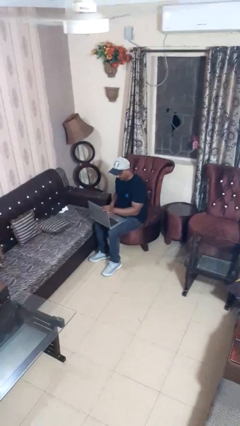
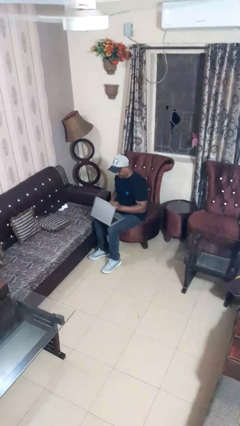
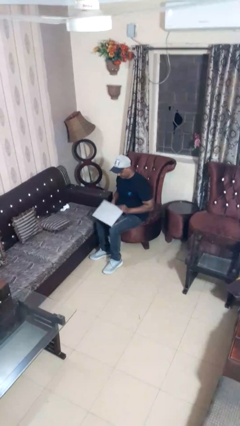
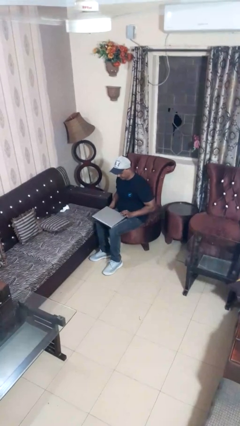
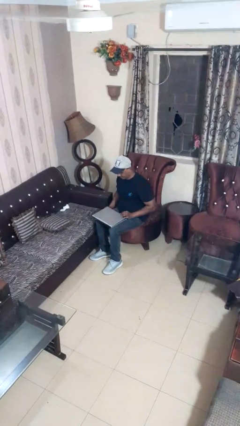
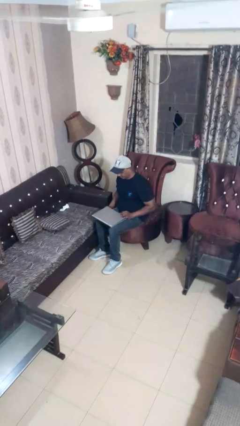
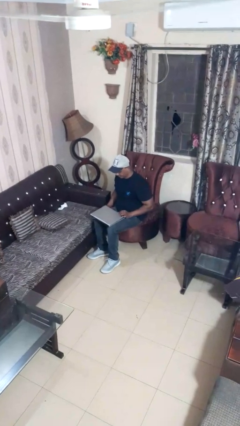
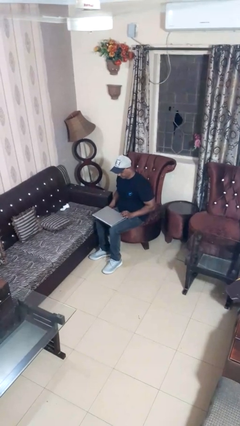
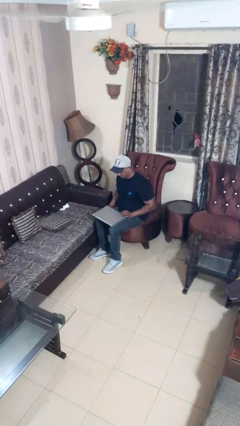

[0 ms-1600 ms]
person closes laptop

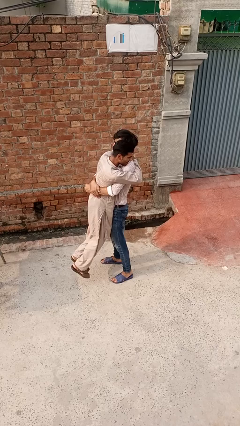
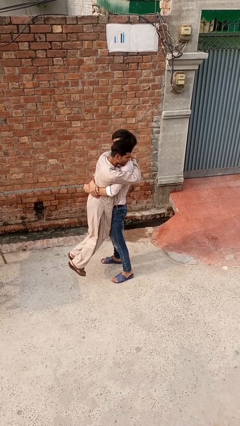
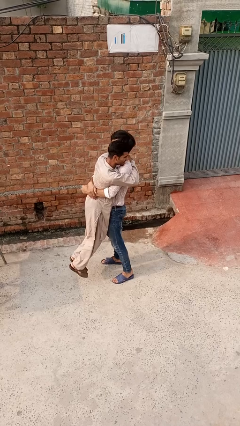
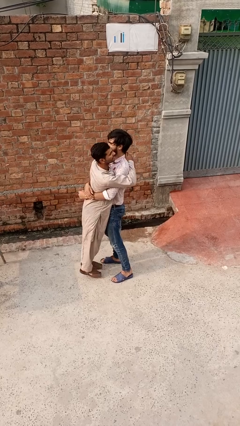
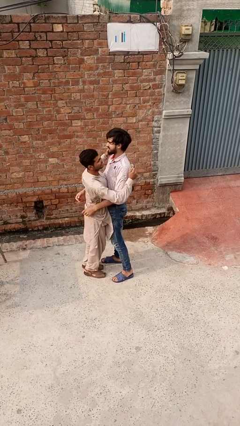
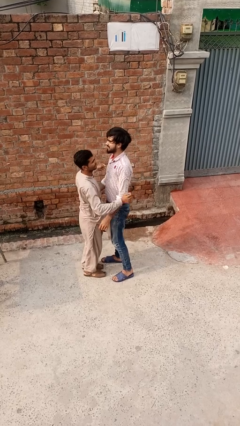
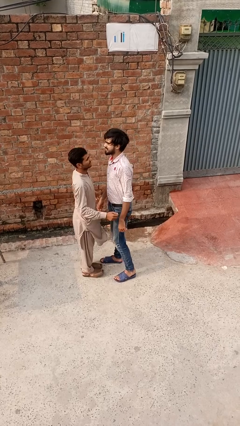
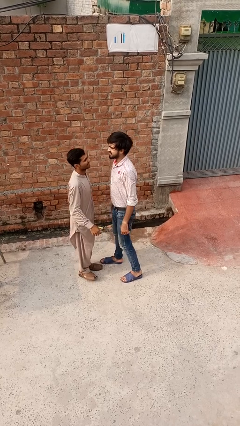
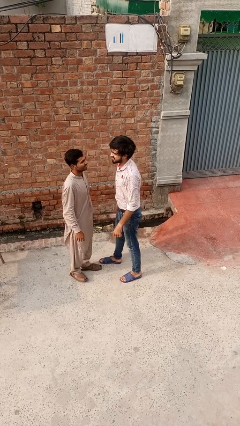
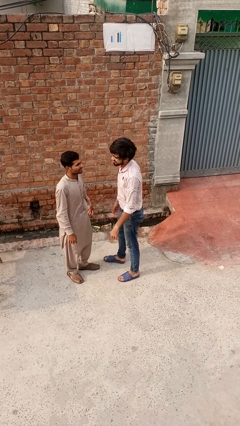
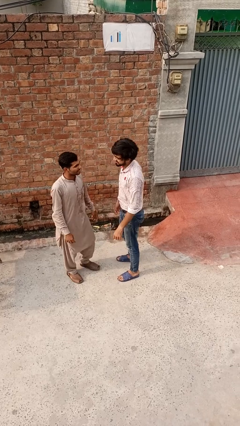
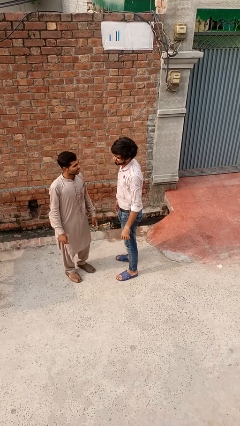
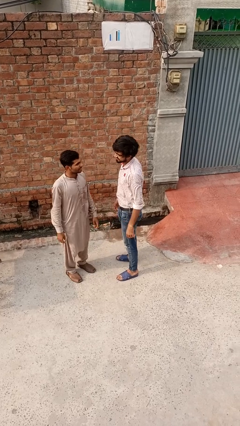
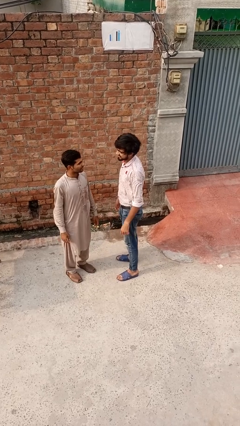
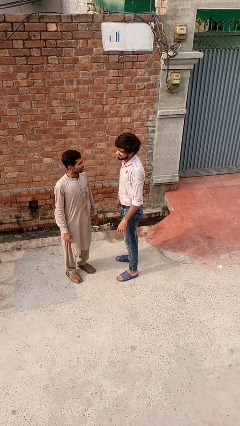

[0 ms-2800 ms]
person puts down person

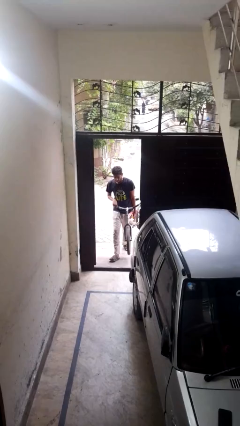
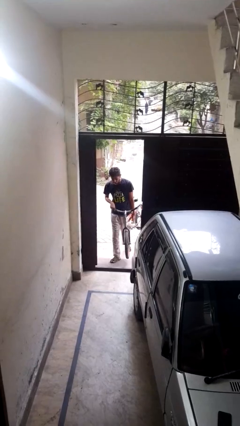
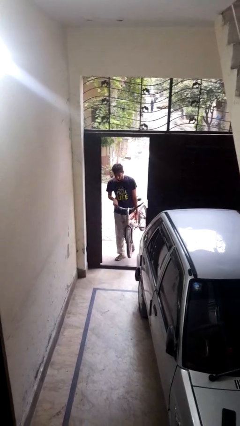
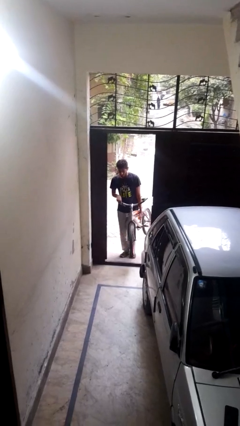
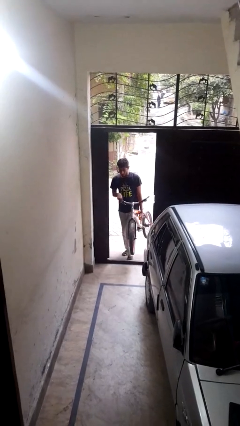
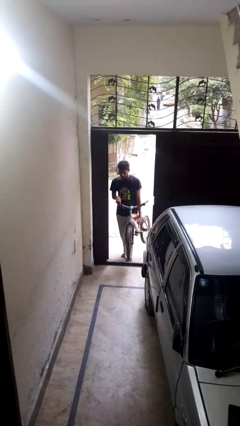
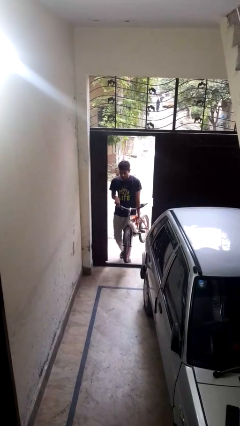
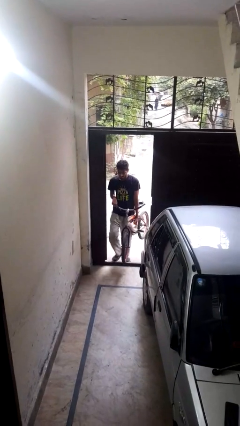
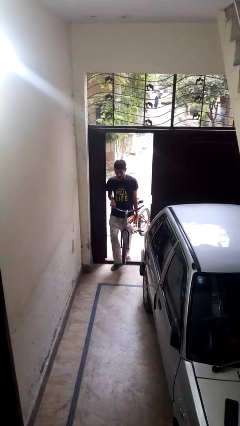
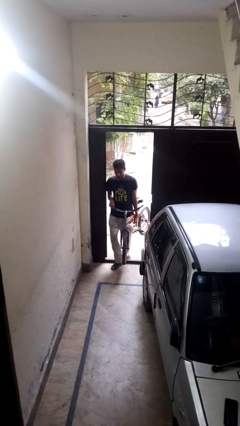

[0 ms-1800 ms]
person carries bicycle

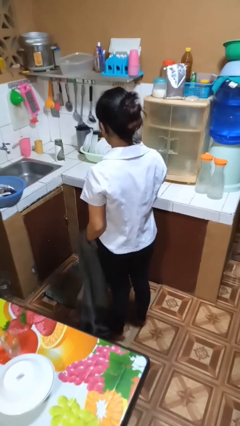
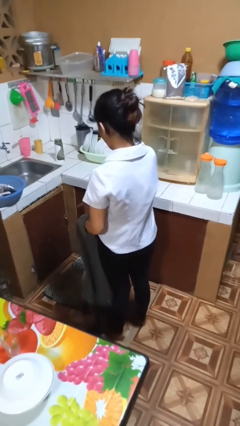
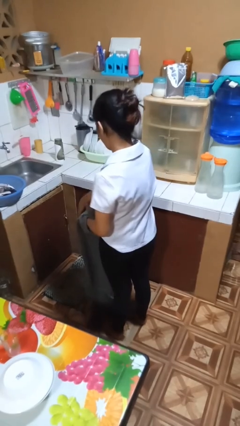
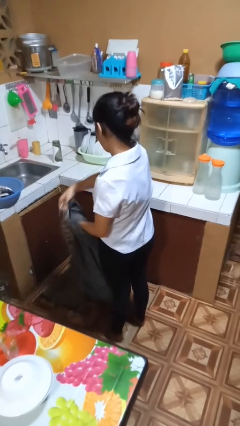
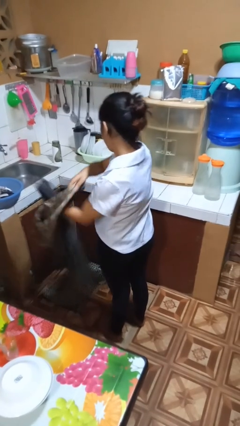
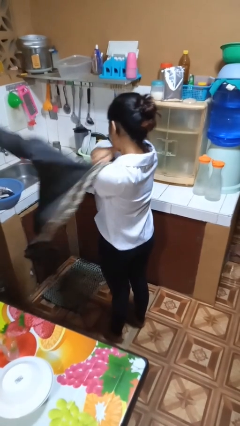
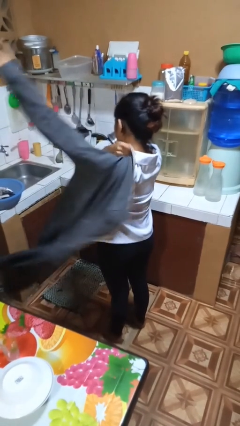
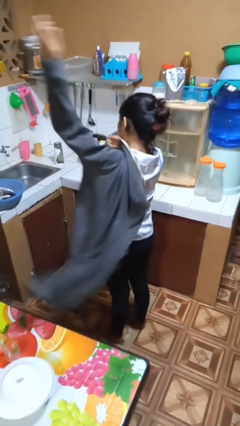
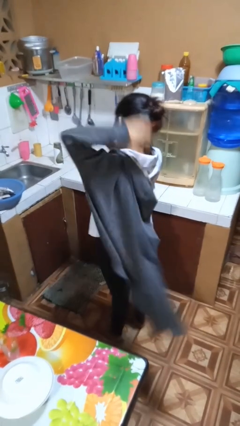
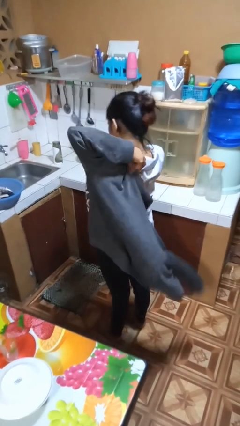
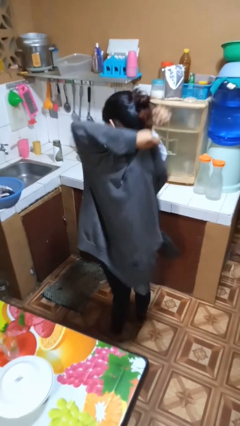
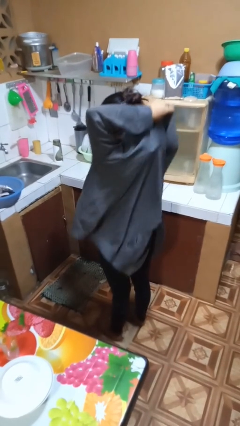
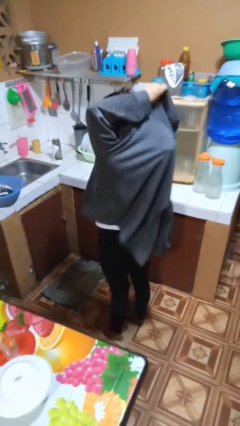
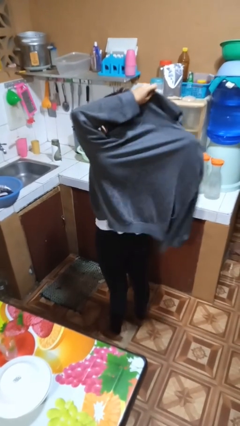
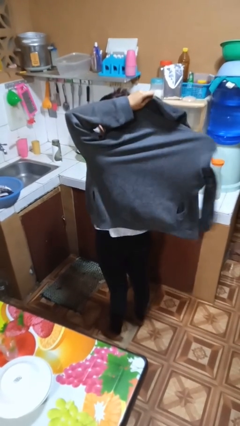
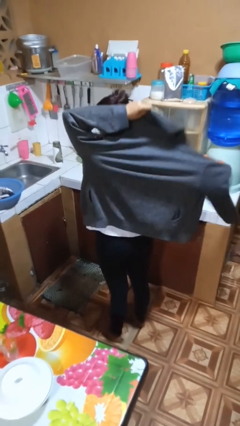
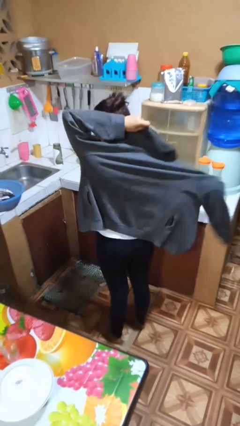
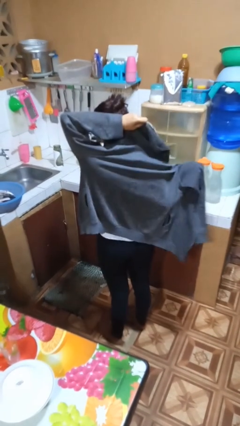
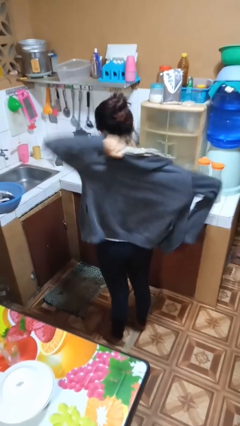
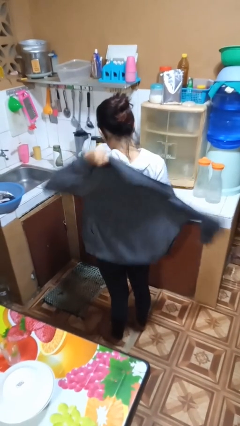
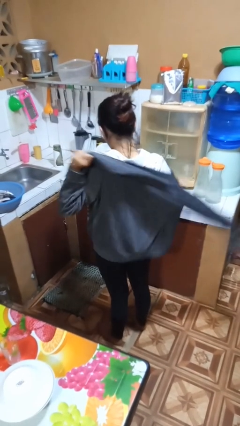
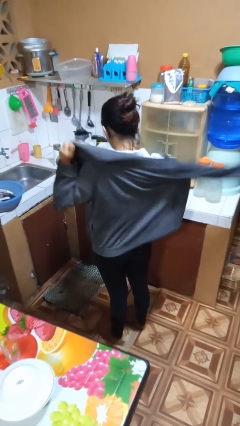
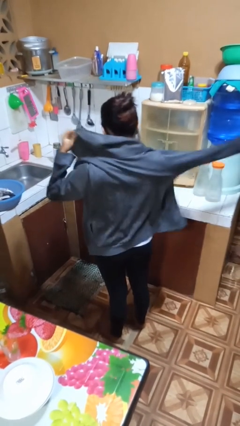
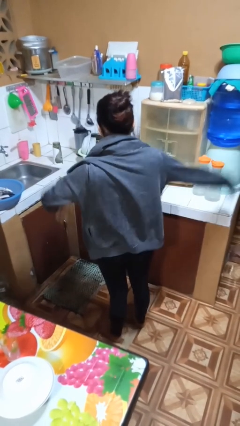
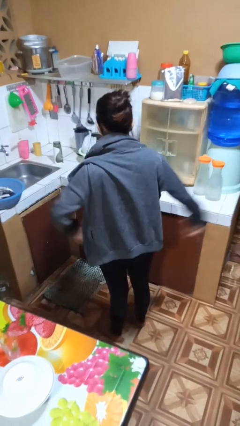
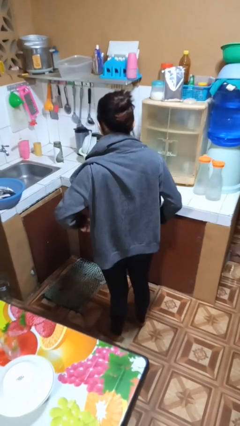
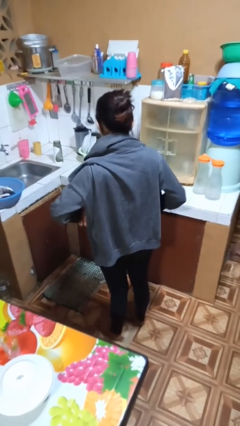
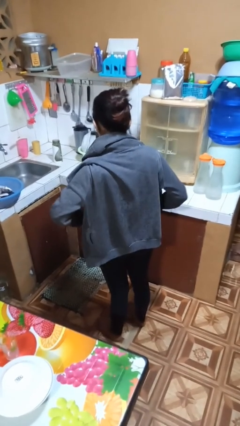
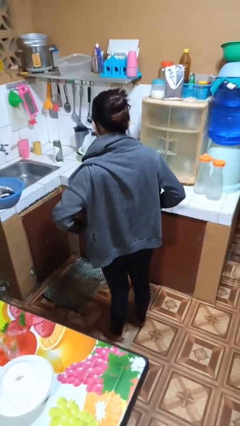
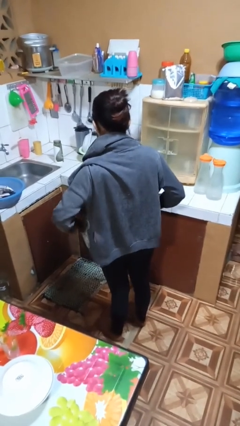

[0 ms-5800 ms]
person puts on jacket

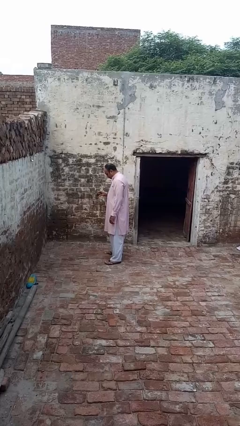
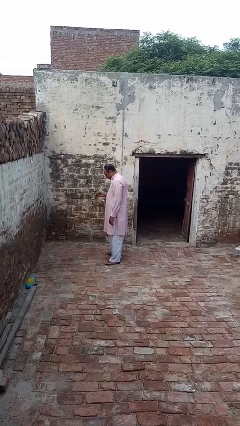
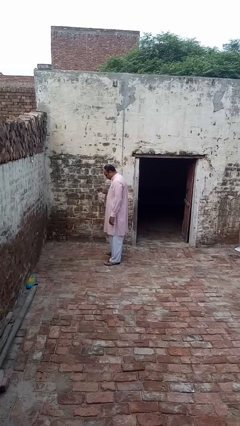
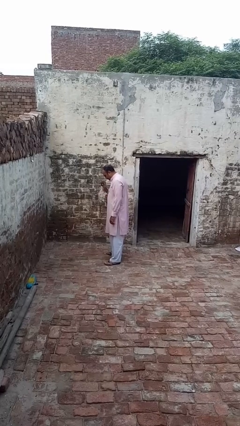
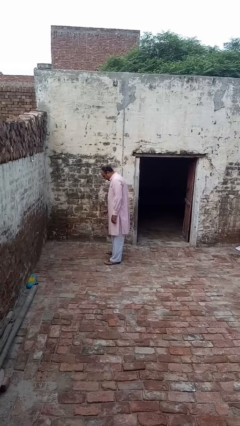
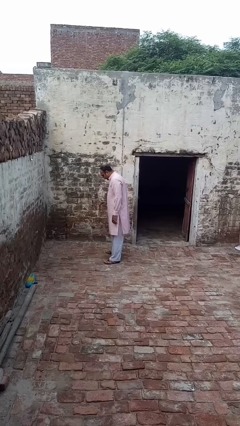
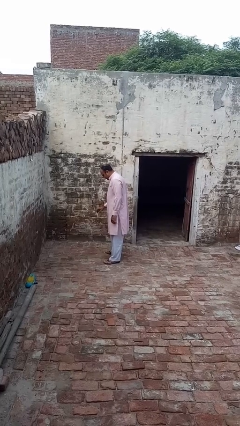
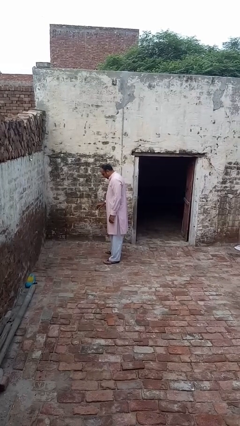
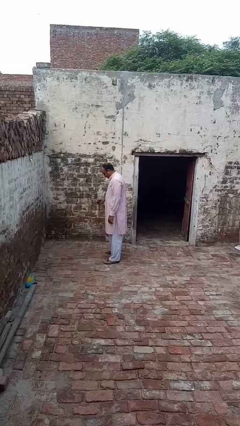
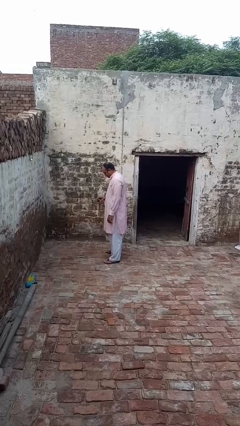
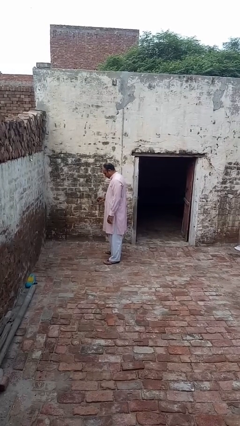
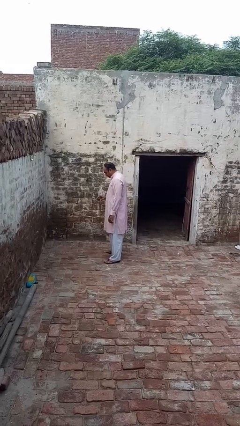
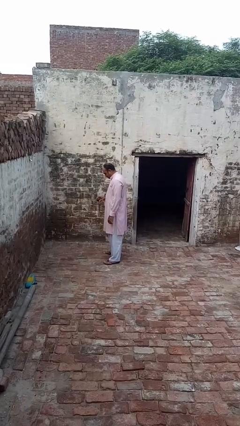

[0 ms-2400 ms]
person bounces ball on floor

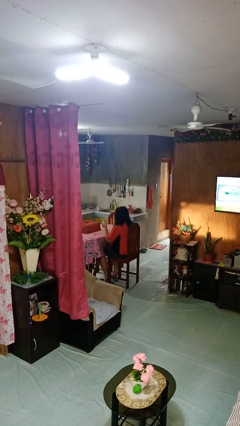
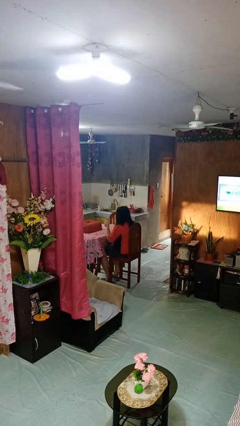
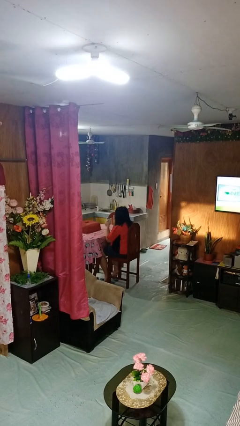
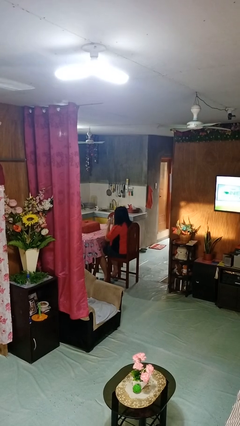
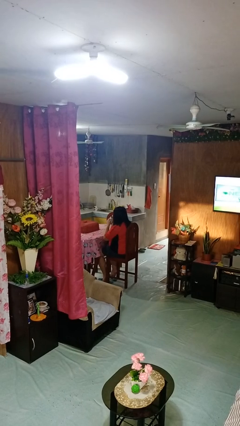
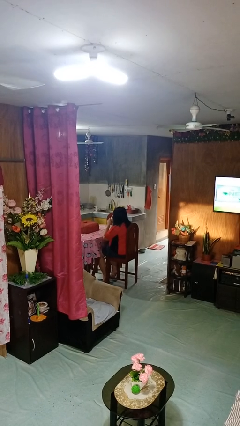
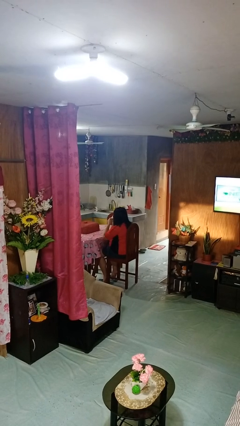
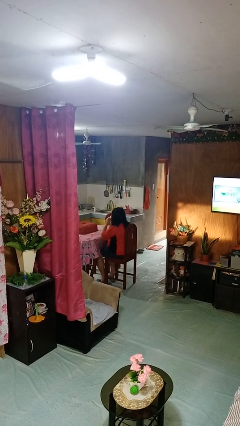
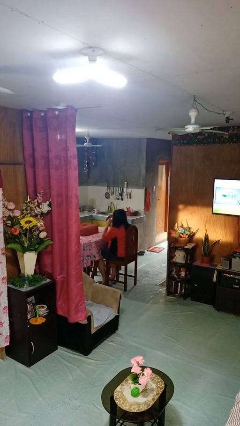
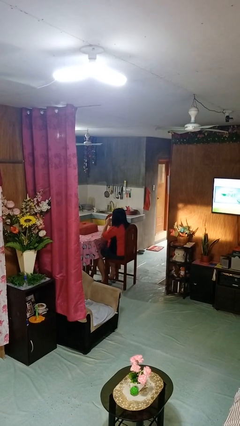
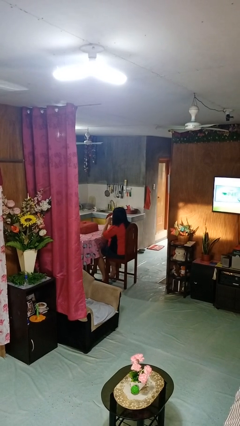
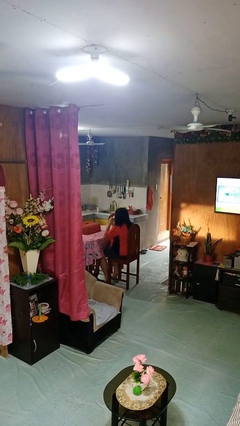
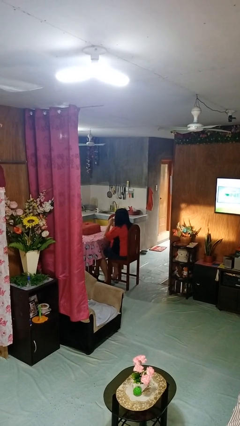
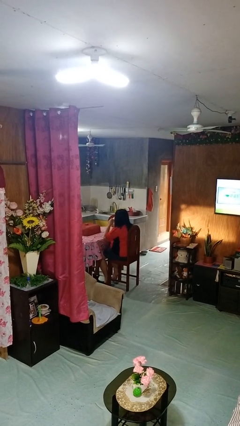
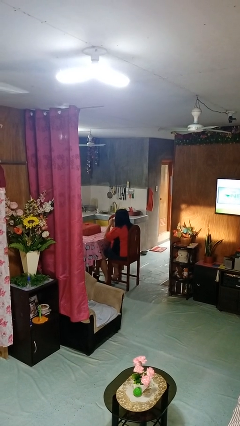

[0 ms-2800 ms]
person drinks from mug
